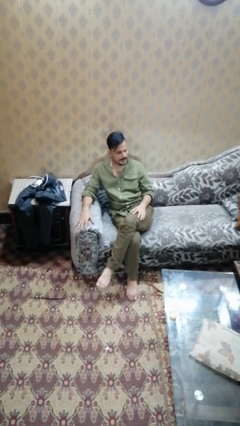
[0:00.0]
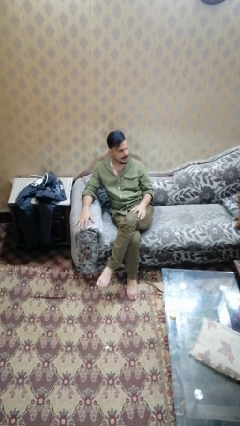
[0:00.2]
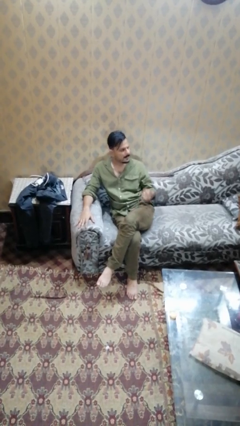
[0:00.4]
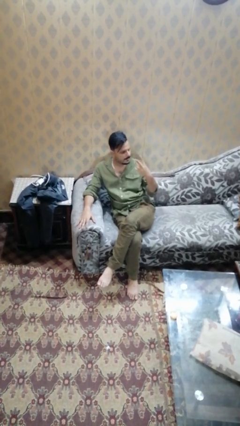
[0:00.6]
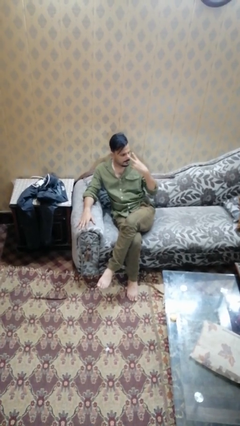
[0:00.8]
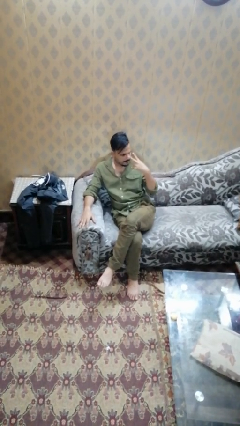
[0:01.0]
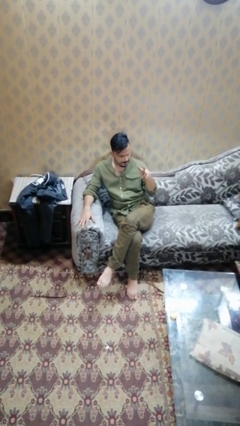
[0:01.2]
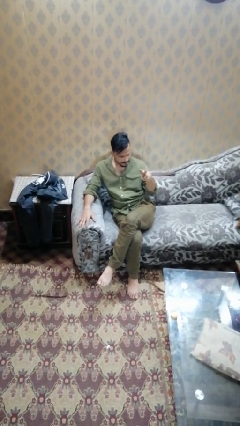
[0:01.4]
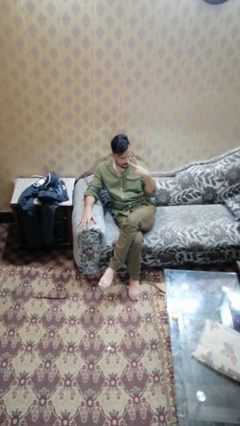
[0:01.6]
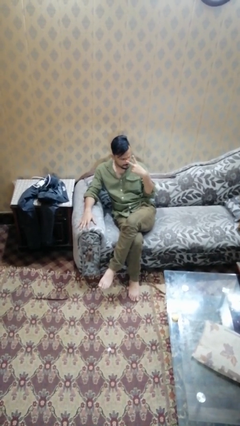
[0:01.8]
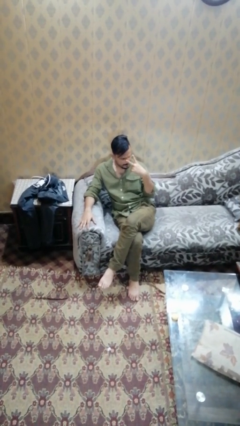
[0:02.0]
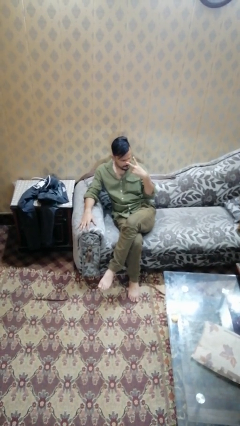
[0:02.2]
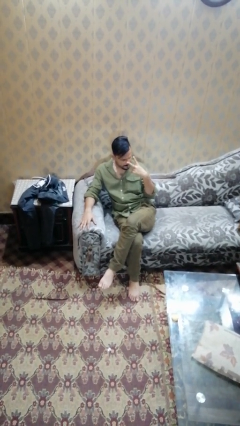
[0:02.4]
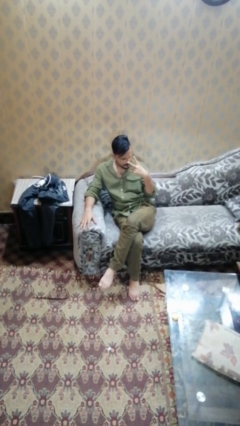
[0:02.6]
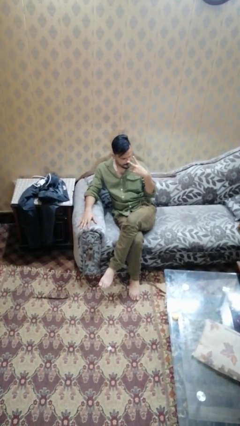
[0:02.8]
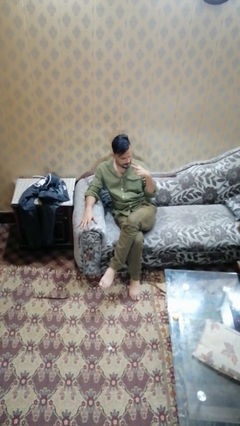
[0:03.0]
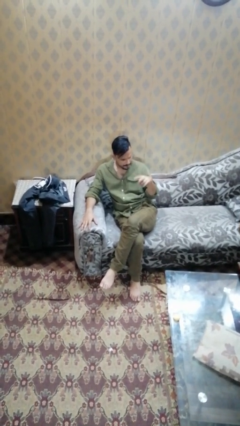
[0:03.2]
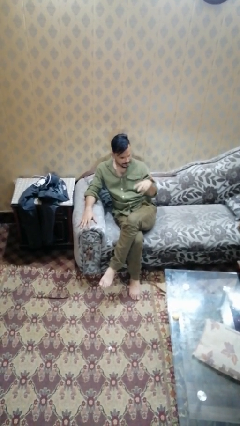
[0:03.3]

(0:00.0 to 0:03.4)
person gestures watch closely

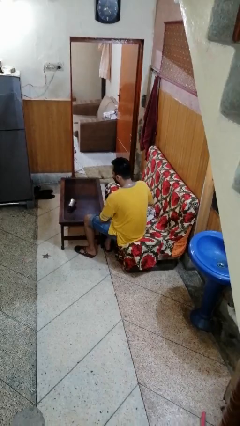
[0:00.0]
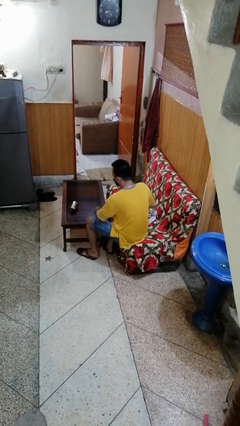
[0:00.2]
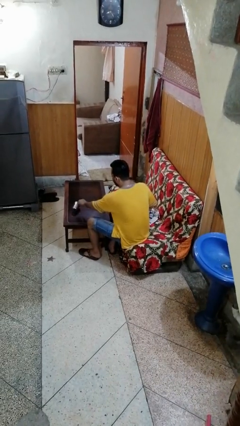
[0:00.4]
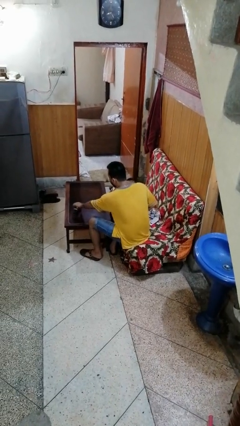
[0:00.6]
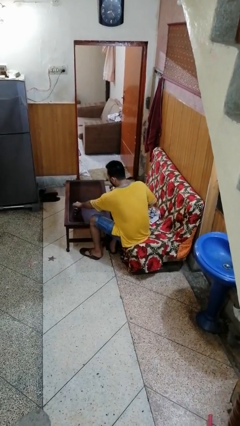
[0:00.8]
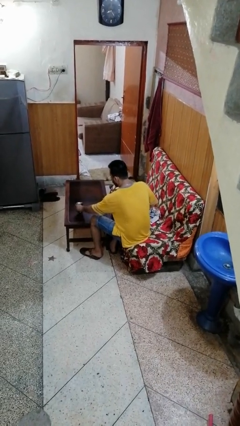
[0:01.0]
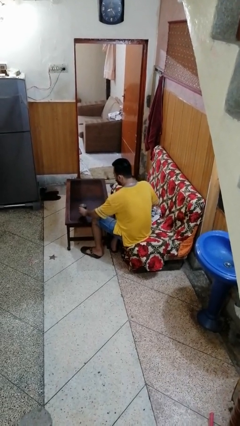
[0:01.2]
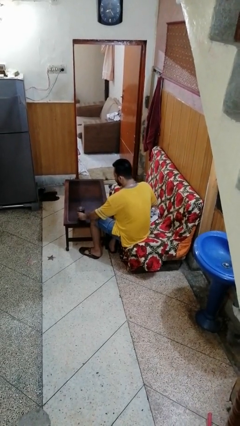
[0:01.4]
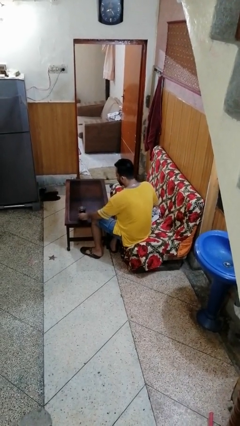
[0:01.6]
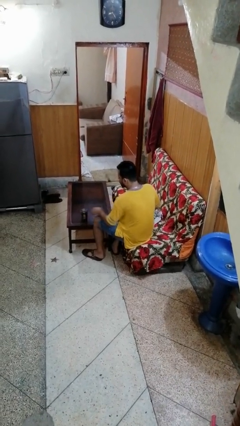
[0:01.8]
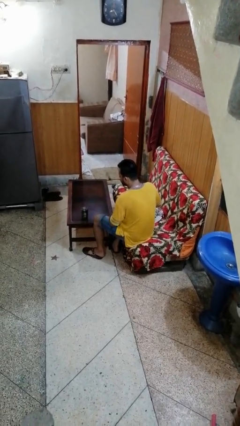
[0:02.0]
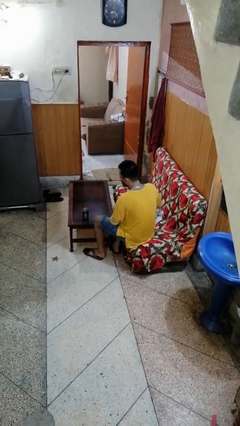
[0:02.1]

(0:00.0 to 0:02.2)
person sets upright glass

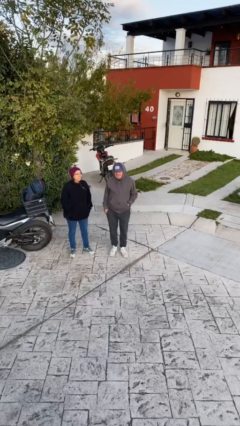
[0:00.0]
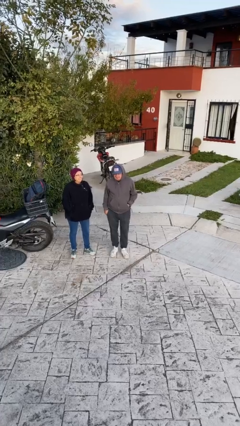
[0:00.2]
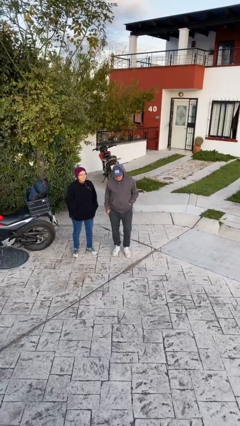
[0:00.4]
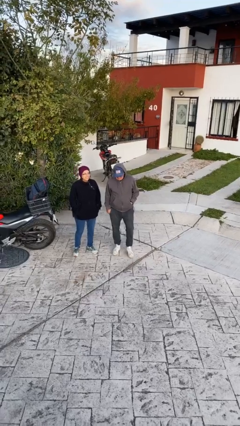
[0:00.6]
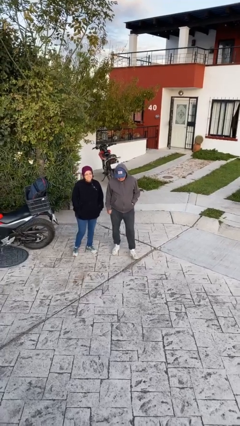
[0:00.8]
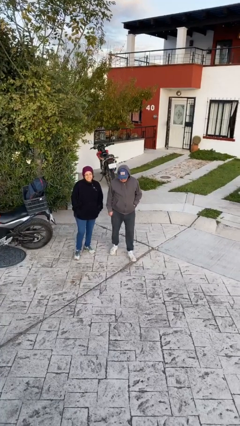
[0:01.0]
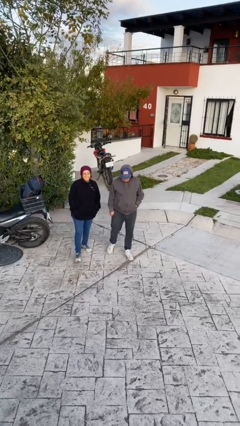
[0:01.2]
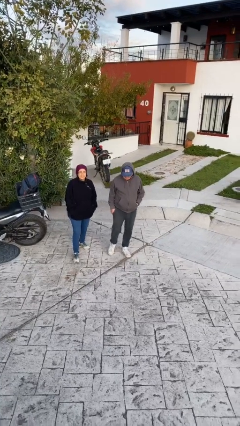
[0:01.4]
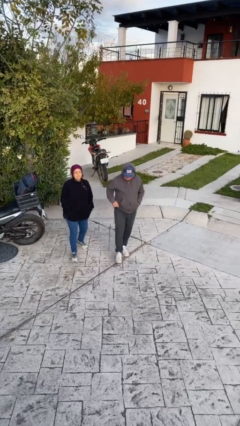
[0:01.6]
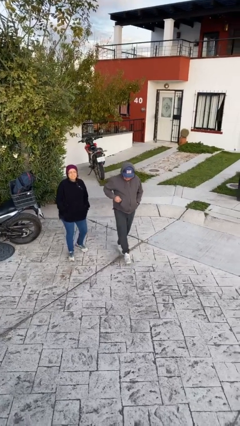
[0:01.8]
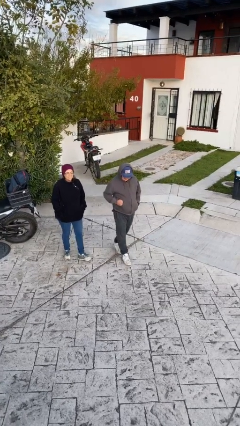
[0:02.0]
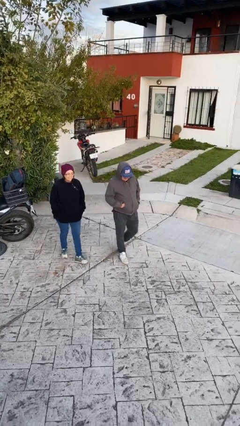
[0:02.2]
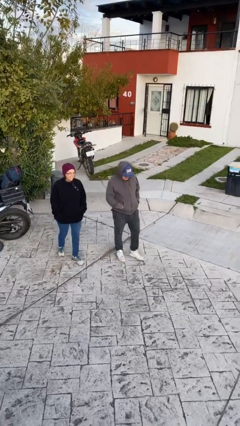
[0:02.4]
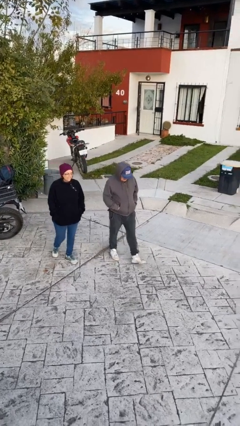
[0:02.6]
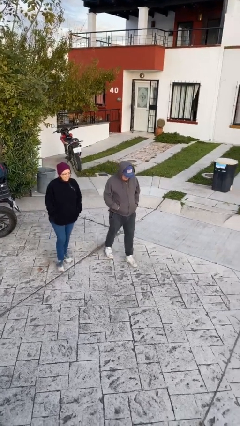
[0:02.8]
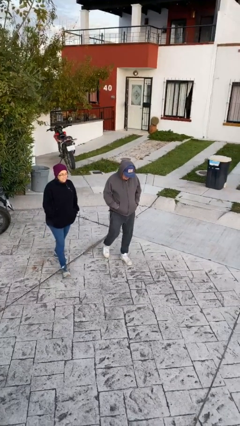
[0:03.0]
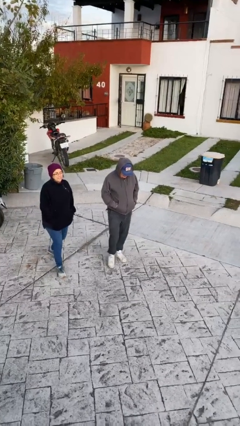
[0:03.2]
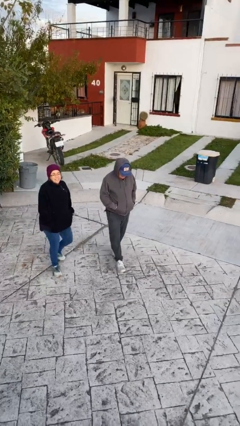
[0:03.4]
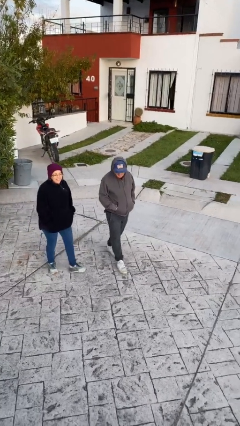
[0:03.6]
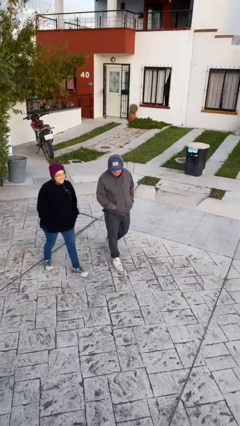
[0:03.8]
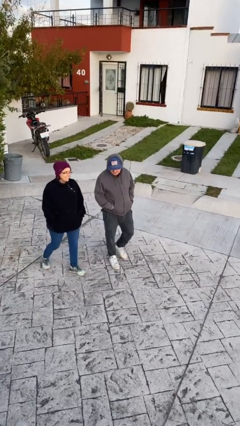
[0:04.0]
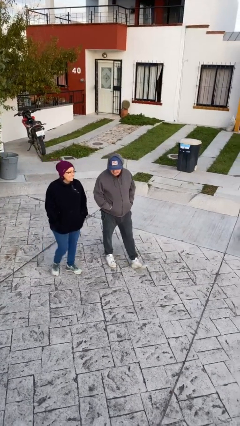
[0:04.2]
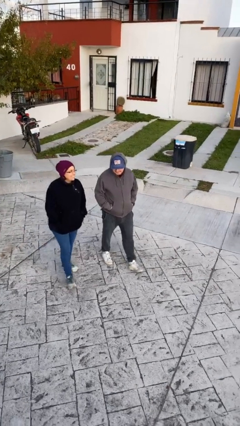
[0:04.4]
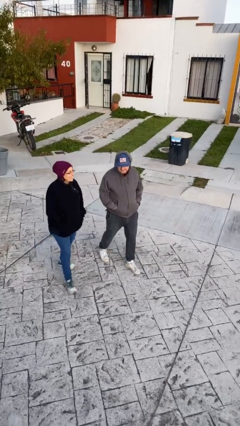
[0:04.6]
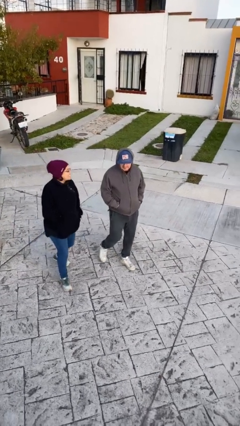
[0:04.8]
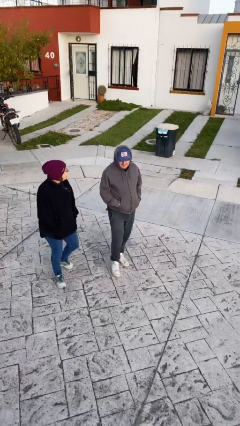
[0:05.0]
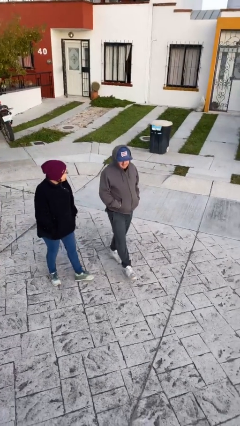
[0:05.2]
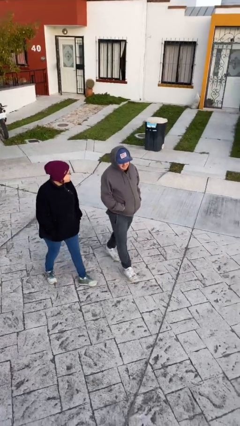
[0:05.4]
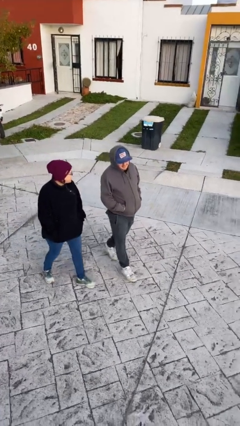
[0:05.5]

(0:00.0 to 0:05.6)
person talks to person

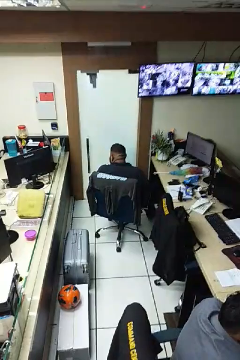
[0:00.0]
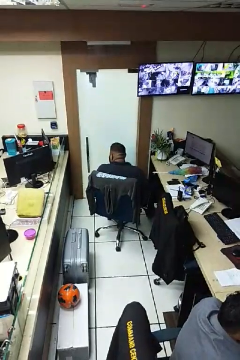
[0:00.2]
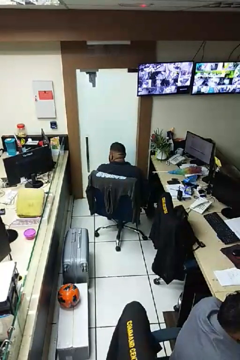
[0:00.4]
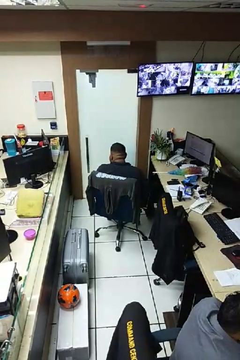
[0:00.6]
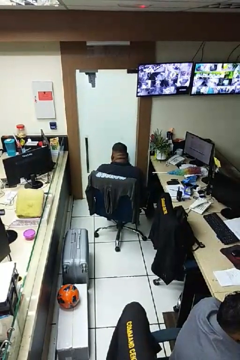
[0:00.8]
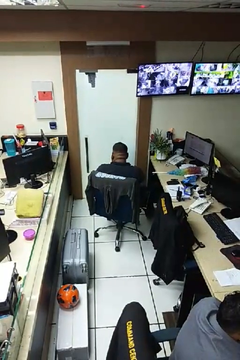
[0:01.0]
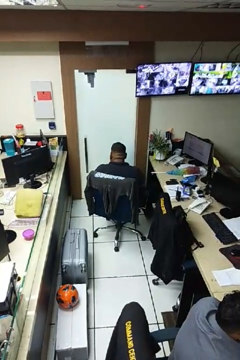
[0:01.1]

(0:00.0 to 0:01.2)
person swats bug

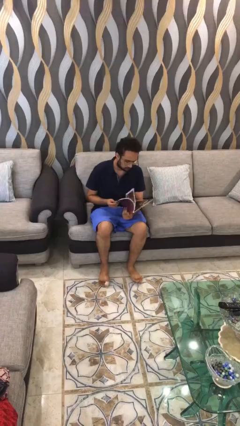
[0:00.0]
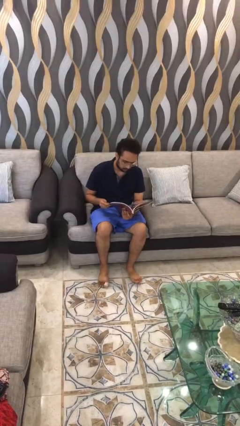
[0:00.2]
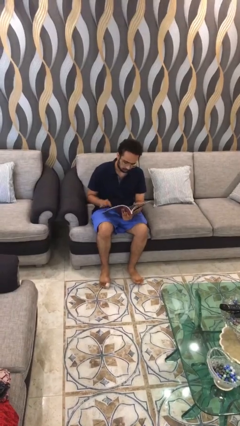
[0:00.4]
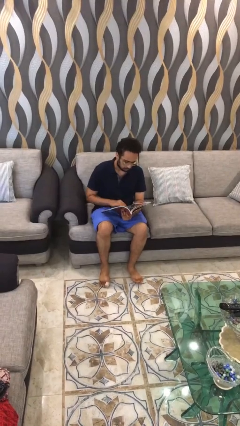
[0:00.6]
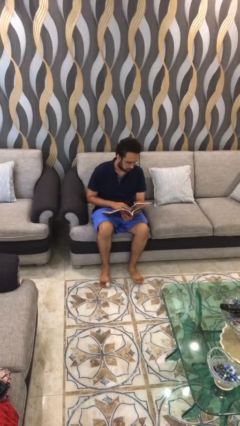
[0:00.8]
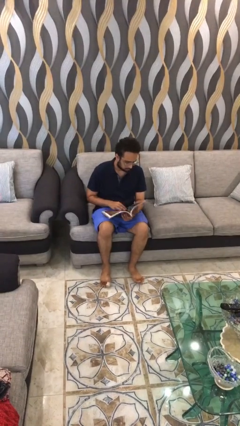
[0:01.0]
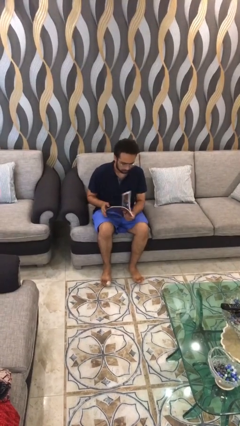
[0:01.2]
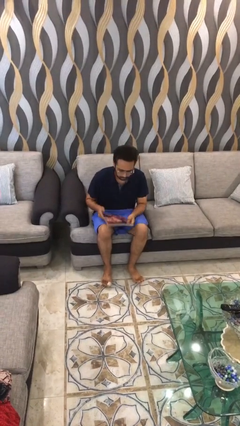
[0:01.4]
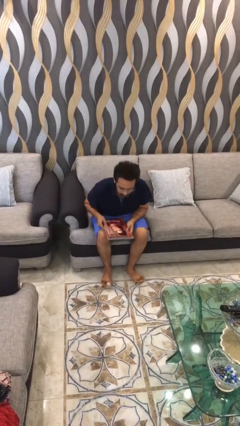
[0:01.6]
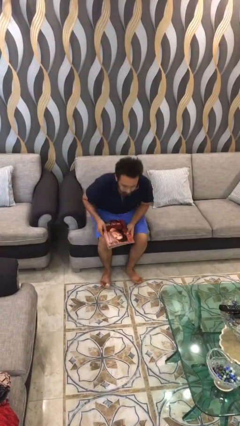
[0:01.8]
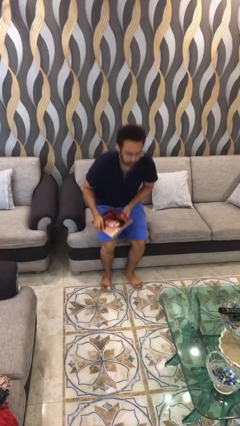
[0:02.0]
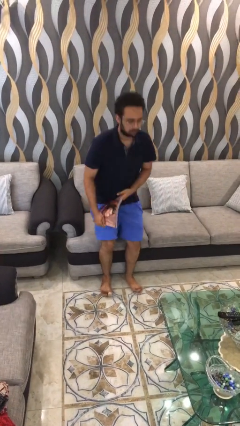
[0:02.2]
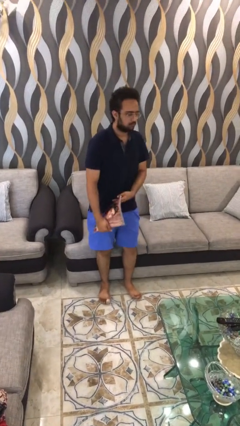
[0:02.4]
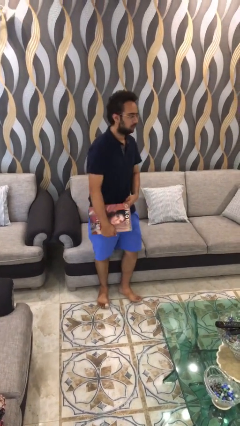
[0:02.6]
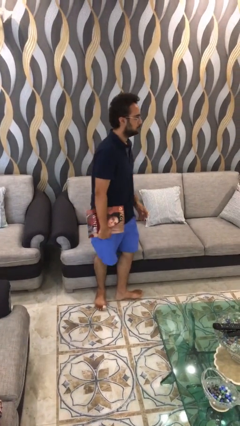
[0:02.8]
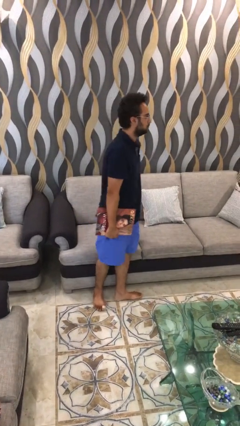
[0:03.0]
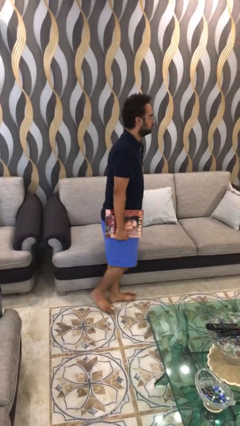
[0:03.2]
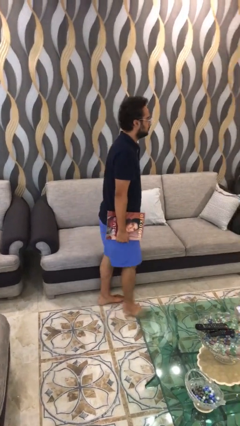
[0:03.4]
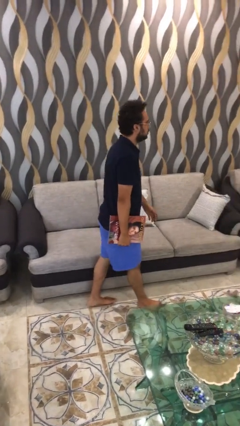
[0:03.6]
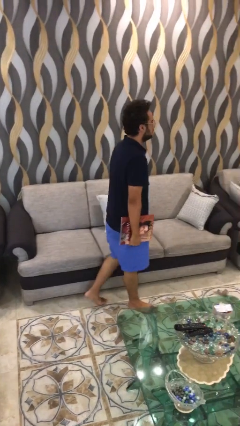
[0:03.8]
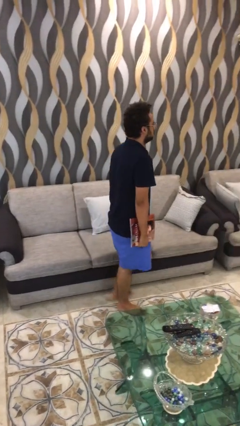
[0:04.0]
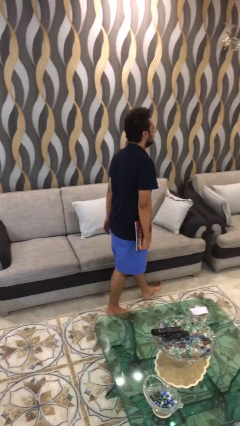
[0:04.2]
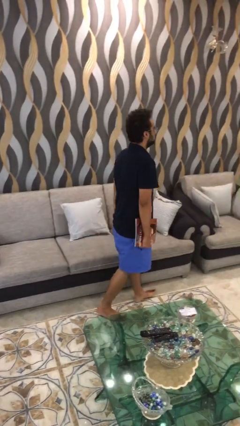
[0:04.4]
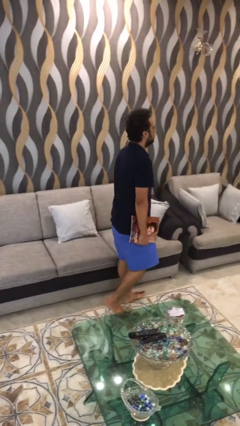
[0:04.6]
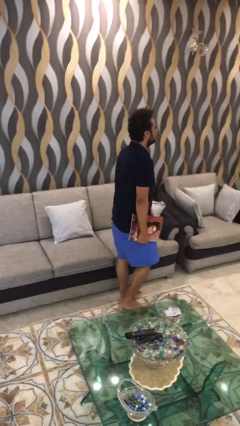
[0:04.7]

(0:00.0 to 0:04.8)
person stands up

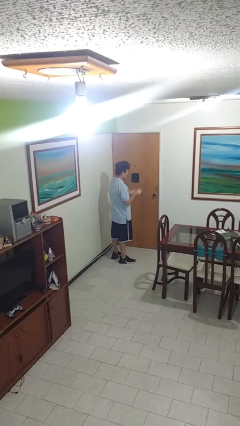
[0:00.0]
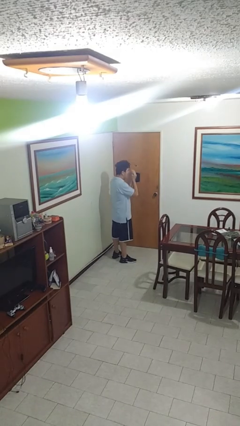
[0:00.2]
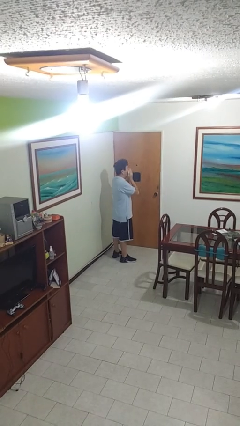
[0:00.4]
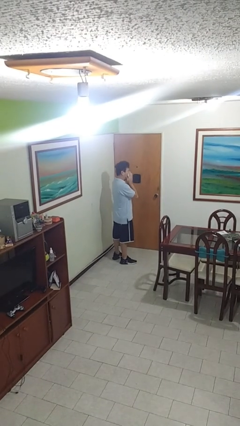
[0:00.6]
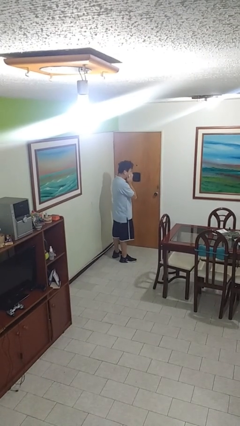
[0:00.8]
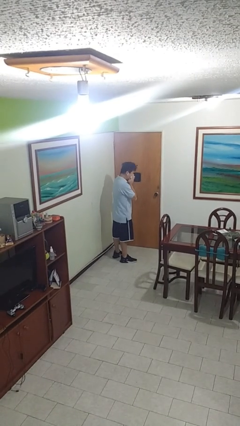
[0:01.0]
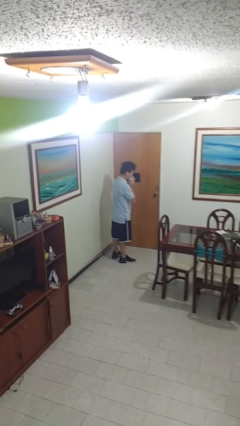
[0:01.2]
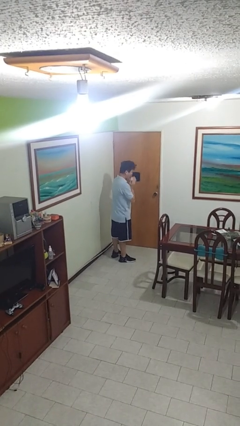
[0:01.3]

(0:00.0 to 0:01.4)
person blows nose
